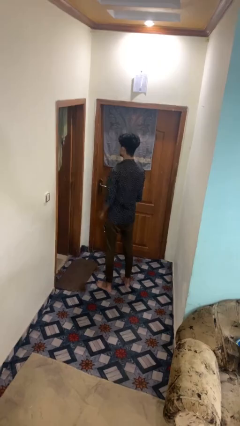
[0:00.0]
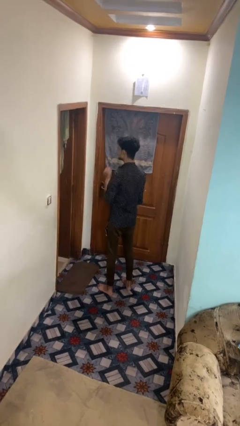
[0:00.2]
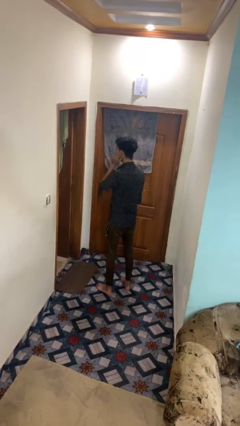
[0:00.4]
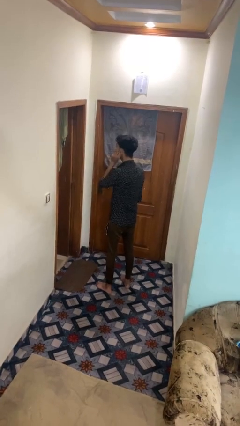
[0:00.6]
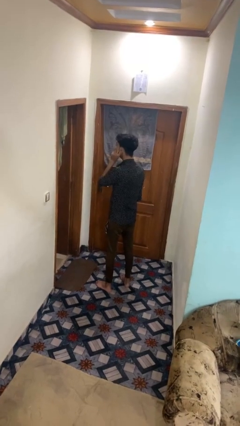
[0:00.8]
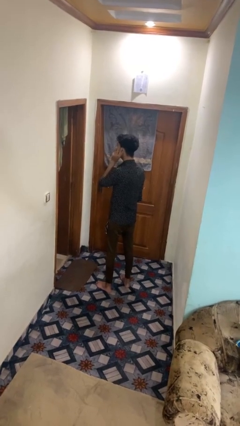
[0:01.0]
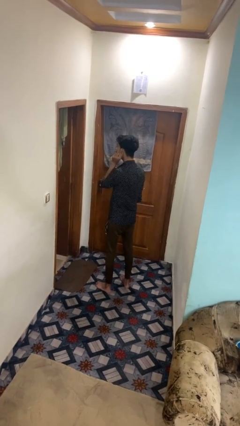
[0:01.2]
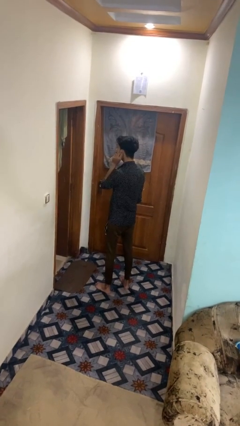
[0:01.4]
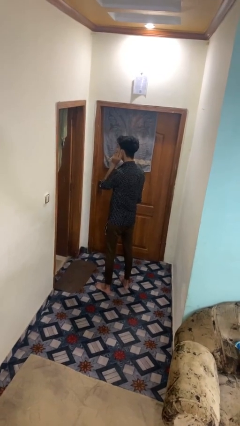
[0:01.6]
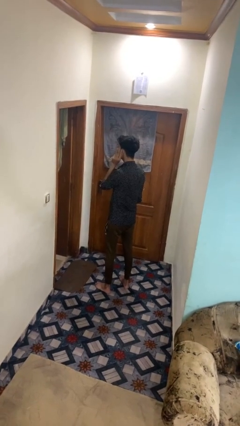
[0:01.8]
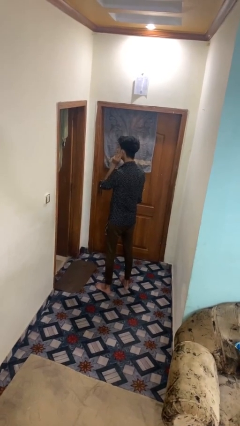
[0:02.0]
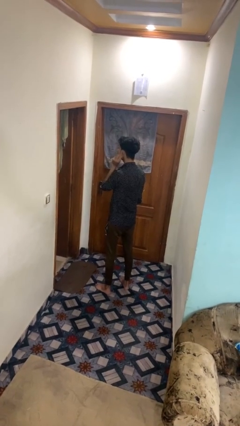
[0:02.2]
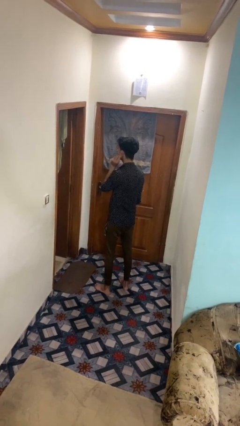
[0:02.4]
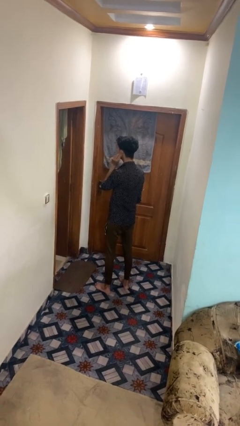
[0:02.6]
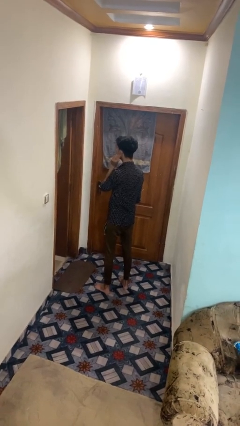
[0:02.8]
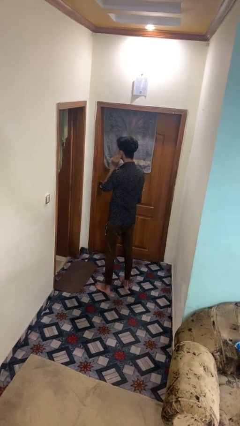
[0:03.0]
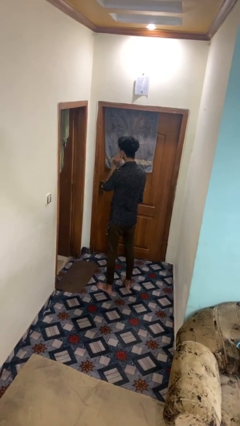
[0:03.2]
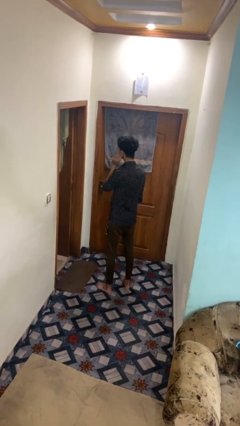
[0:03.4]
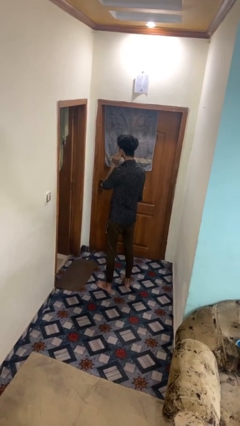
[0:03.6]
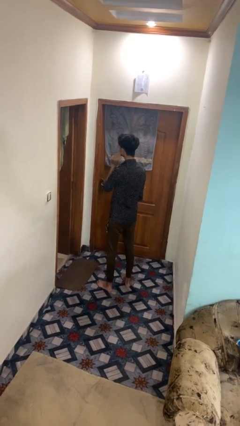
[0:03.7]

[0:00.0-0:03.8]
person touches earlobe

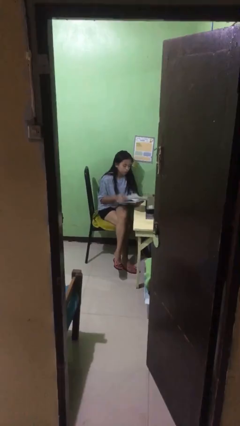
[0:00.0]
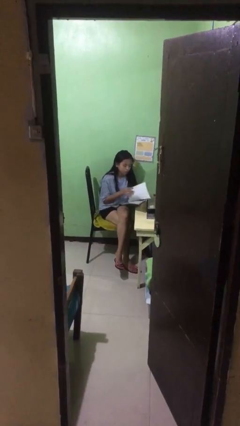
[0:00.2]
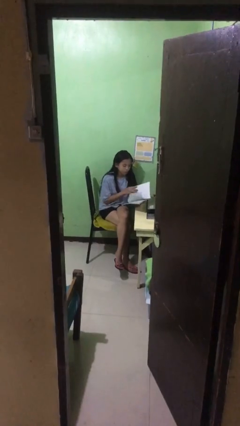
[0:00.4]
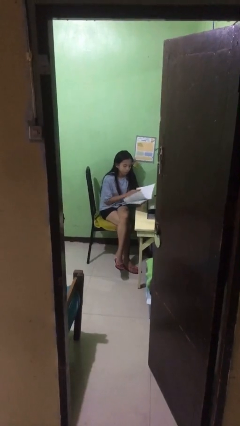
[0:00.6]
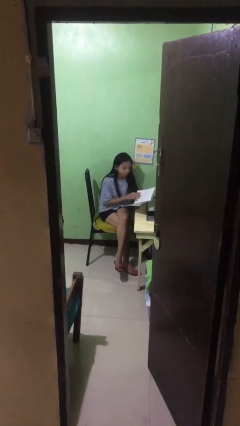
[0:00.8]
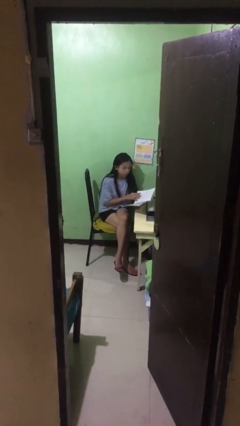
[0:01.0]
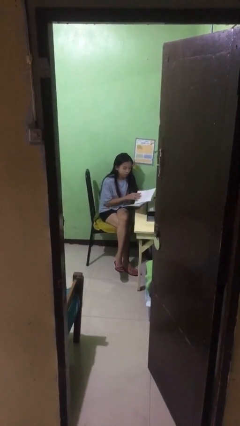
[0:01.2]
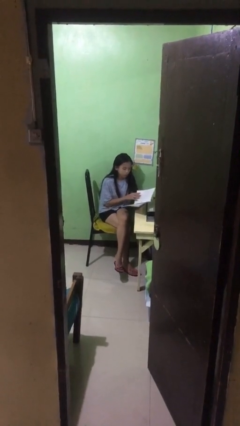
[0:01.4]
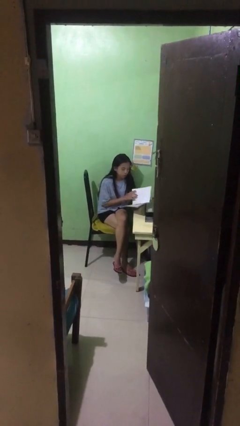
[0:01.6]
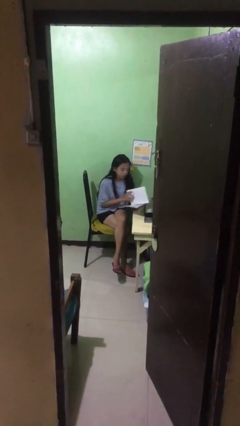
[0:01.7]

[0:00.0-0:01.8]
person reads document

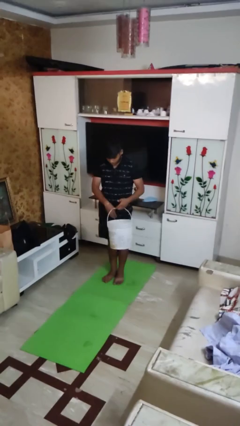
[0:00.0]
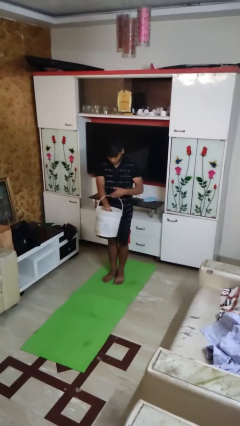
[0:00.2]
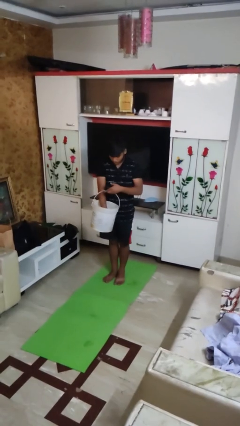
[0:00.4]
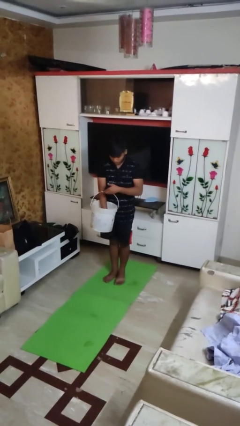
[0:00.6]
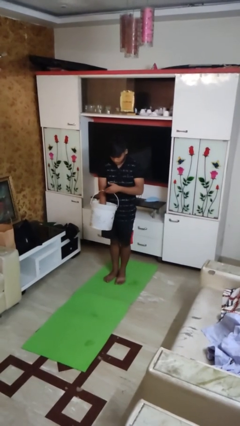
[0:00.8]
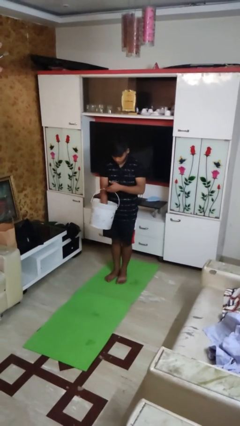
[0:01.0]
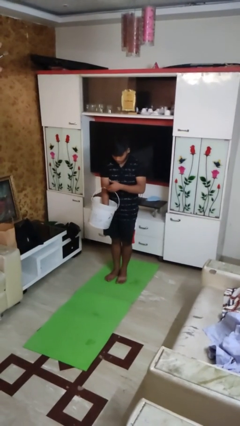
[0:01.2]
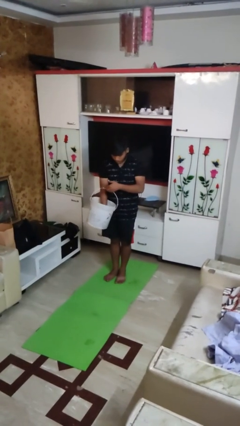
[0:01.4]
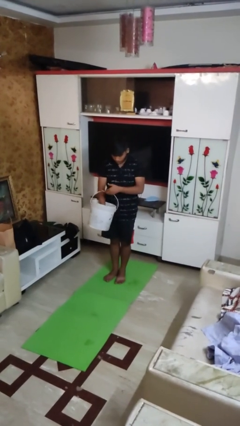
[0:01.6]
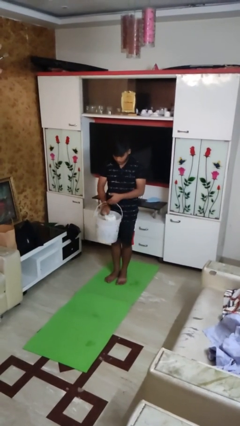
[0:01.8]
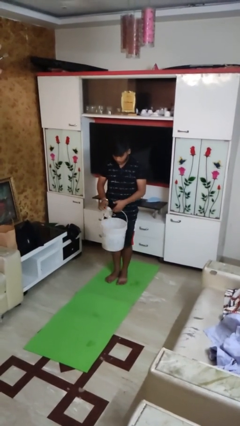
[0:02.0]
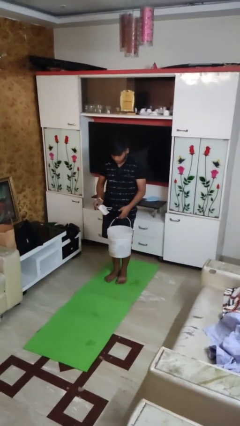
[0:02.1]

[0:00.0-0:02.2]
person takes object from basket

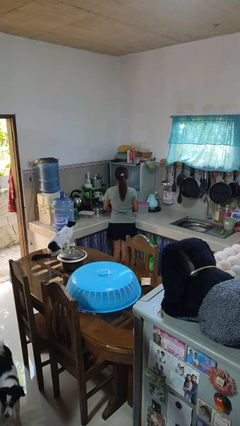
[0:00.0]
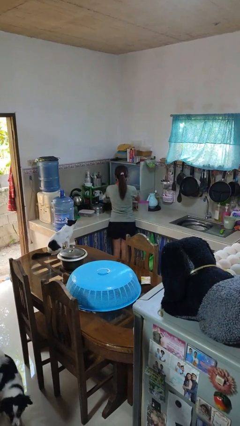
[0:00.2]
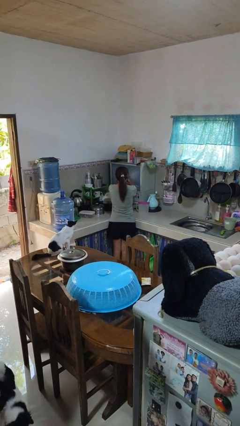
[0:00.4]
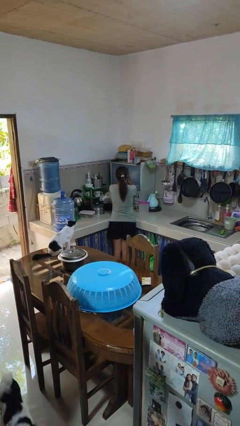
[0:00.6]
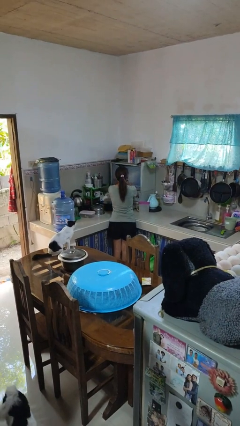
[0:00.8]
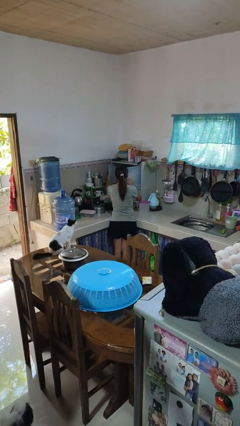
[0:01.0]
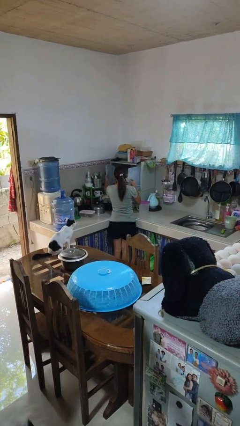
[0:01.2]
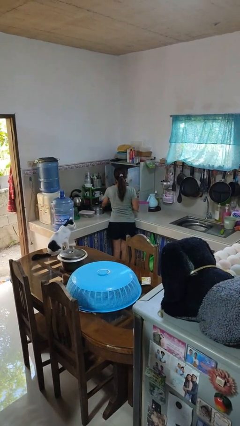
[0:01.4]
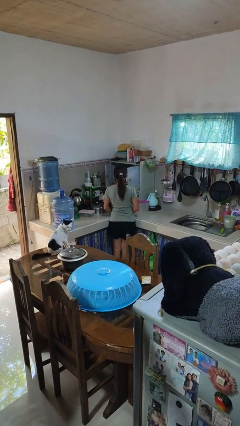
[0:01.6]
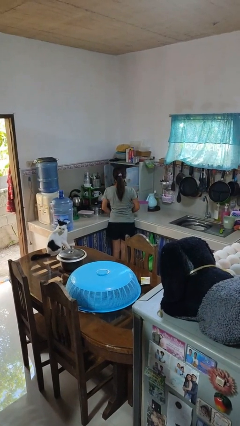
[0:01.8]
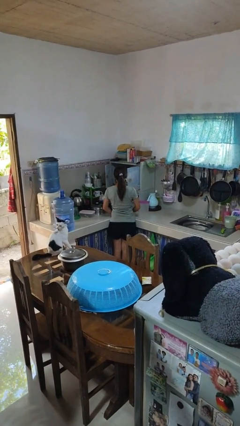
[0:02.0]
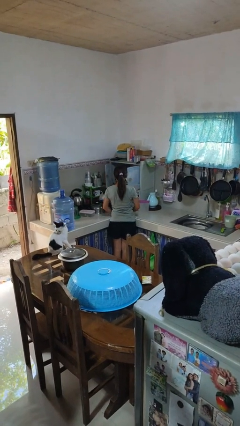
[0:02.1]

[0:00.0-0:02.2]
person opens kitchen drawer

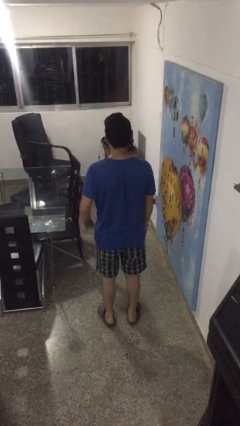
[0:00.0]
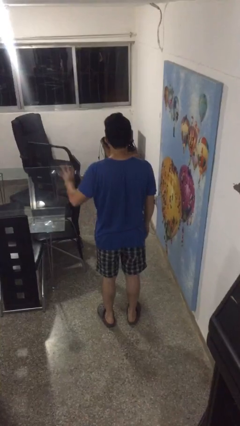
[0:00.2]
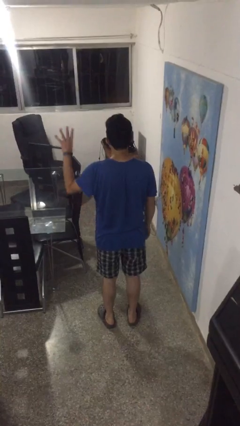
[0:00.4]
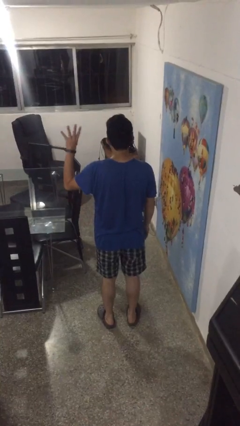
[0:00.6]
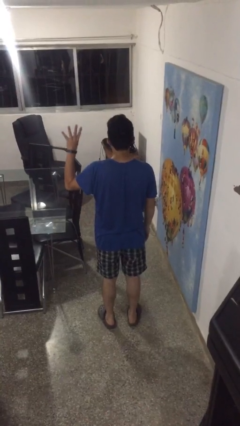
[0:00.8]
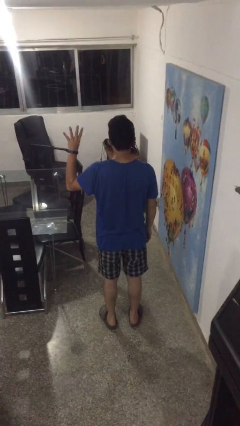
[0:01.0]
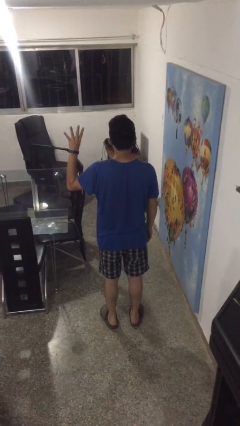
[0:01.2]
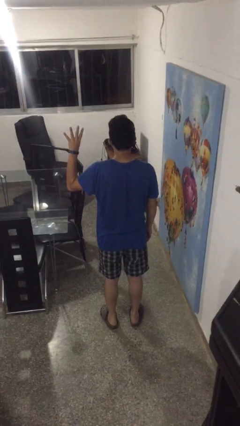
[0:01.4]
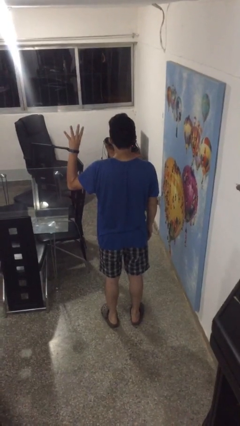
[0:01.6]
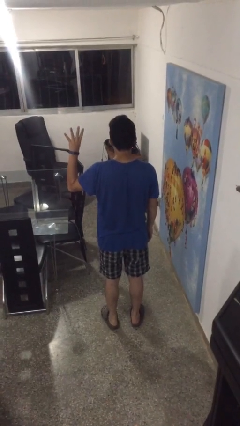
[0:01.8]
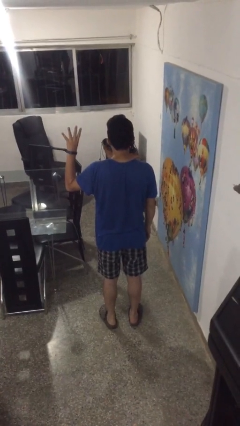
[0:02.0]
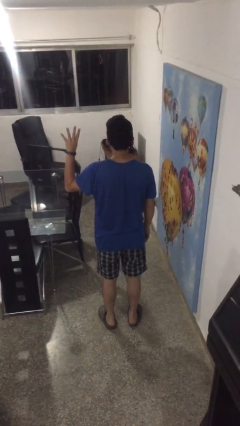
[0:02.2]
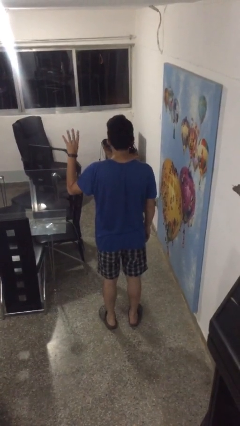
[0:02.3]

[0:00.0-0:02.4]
person gestures number four

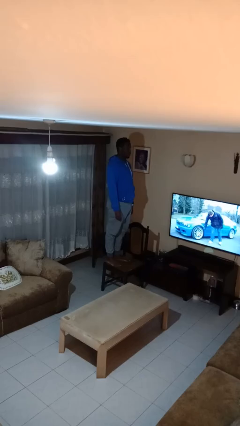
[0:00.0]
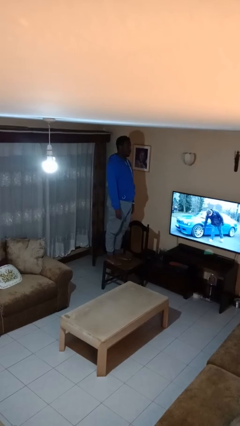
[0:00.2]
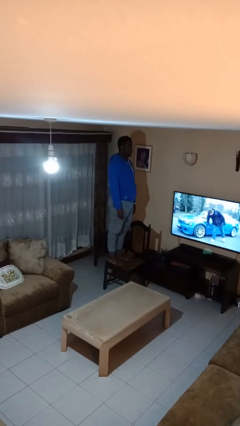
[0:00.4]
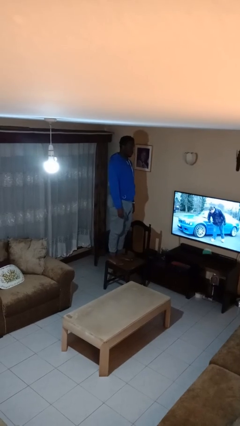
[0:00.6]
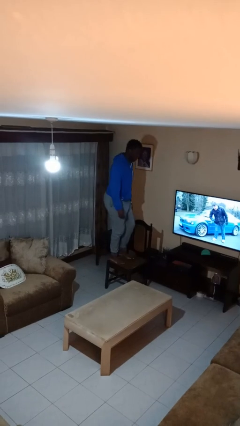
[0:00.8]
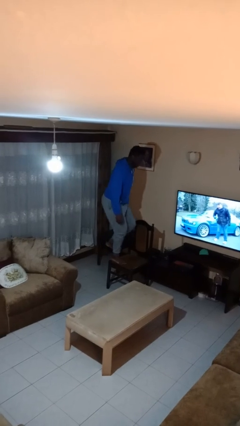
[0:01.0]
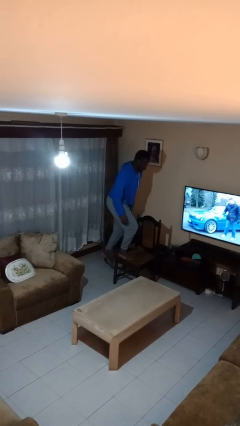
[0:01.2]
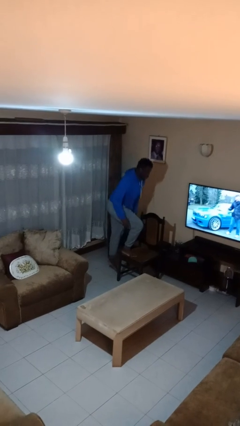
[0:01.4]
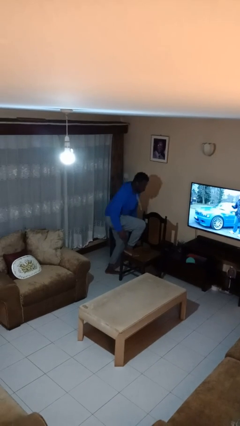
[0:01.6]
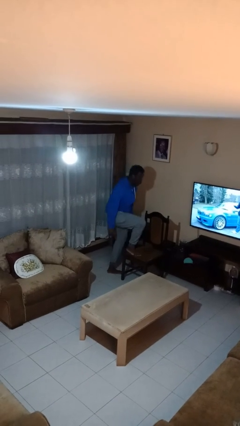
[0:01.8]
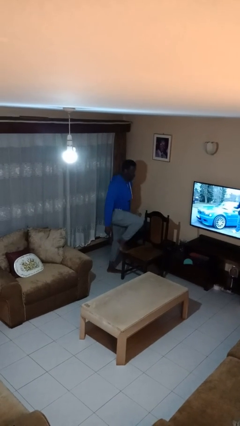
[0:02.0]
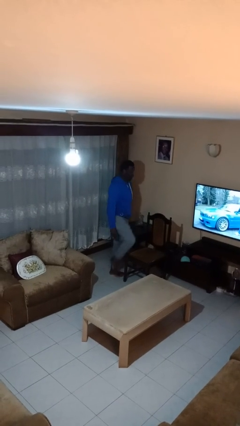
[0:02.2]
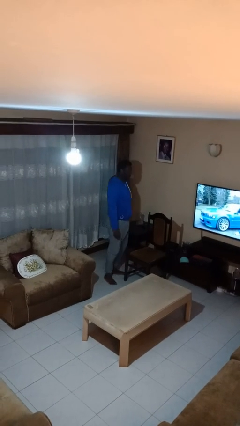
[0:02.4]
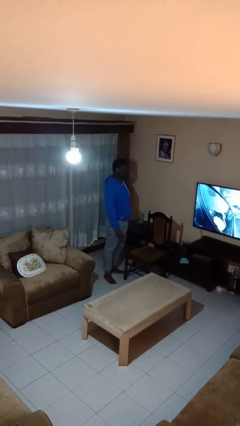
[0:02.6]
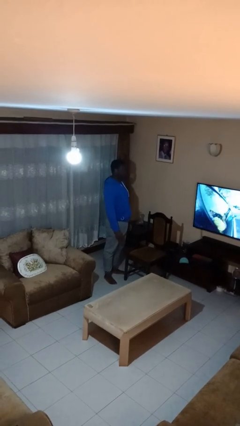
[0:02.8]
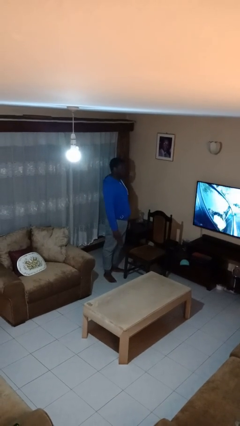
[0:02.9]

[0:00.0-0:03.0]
person climbs off chair

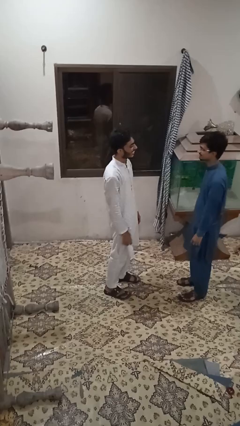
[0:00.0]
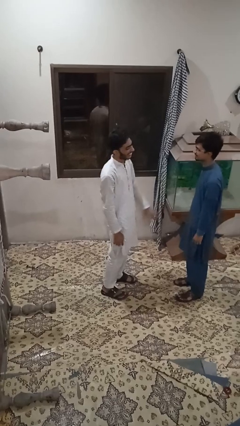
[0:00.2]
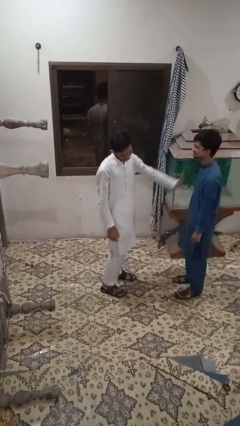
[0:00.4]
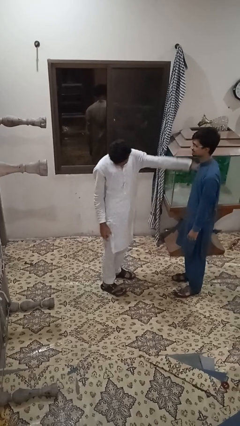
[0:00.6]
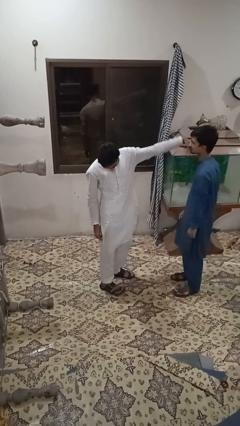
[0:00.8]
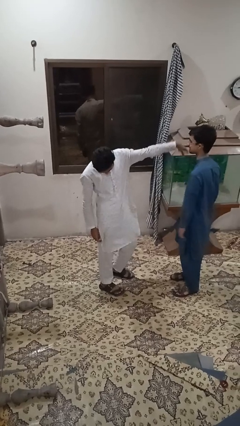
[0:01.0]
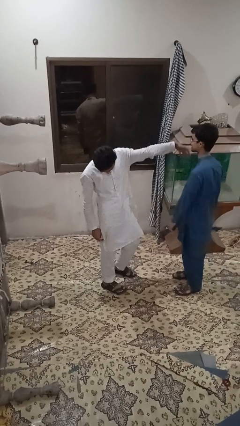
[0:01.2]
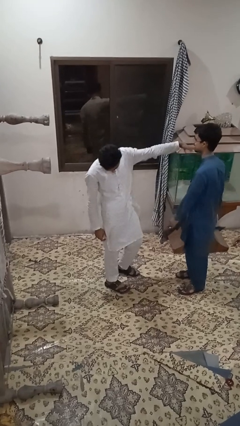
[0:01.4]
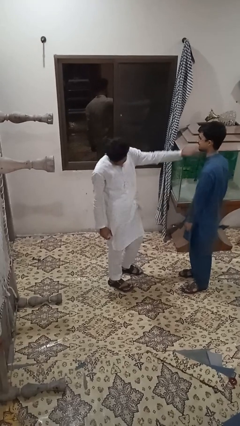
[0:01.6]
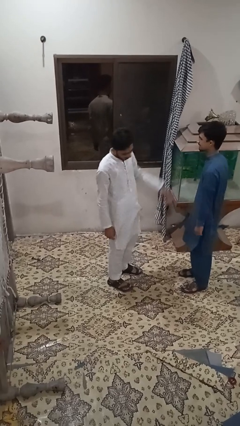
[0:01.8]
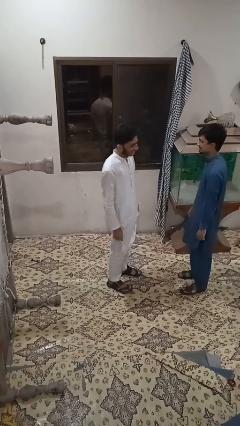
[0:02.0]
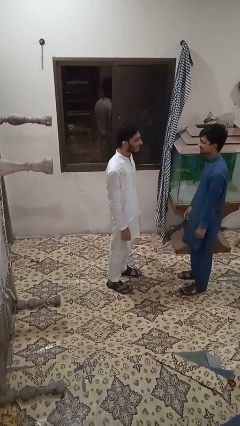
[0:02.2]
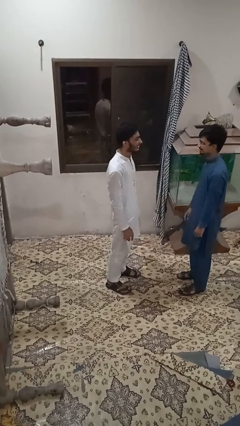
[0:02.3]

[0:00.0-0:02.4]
person shoves person
